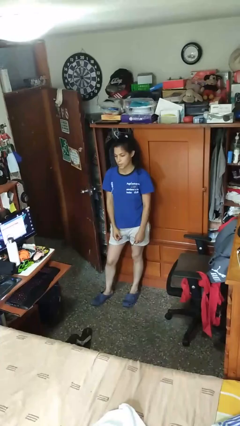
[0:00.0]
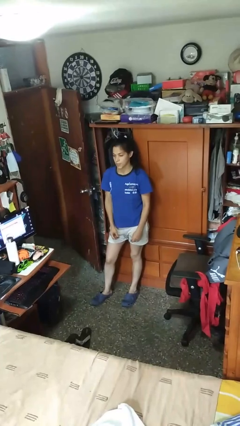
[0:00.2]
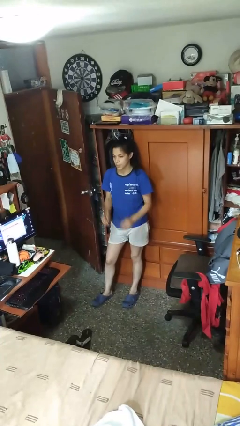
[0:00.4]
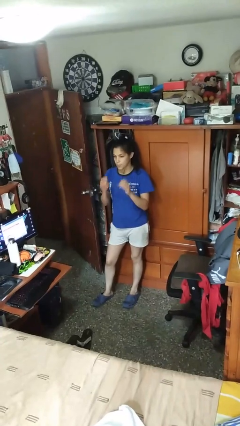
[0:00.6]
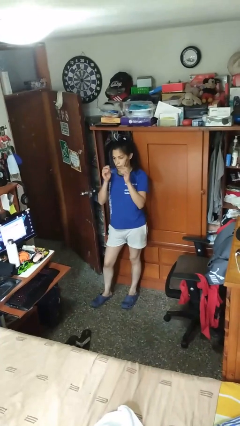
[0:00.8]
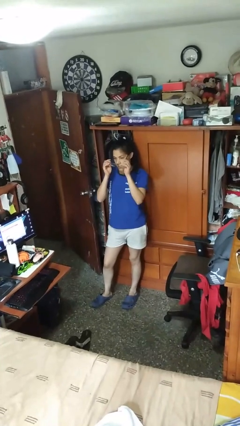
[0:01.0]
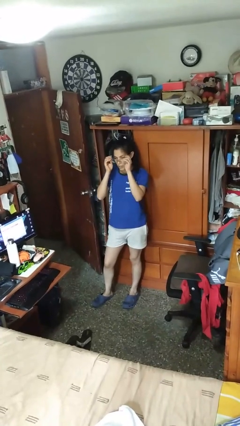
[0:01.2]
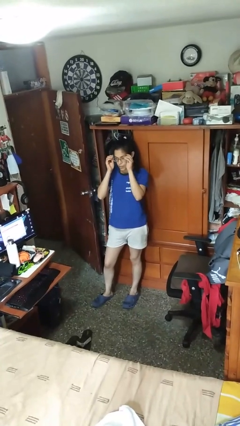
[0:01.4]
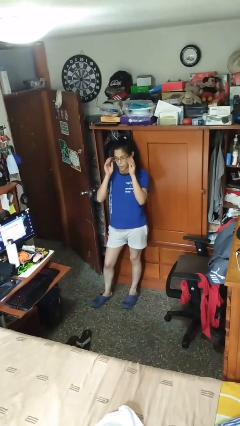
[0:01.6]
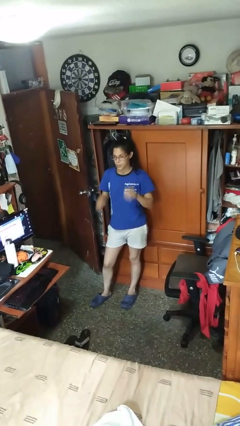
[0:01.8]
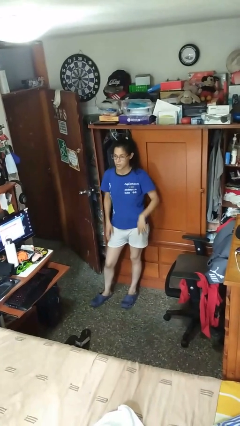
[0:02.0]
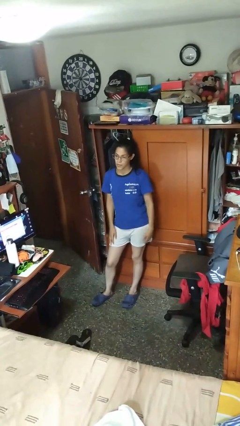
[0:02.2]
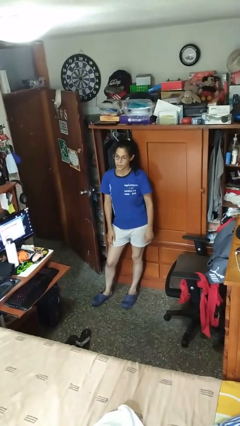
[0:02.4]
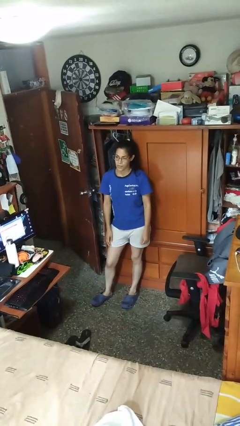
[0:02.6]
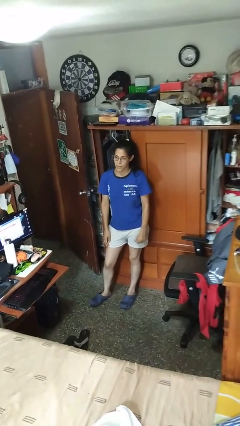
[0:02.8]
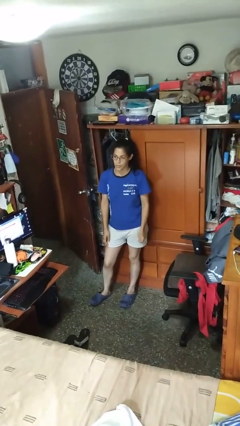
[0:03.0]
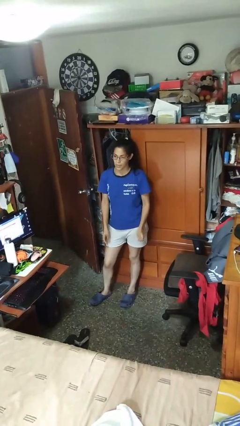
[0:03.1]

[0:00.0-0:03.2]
person puts on glasses

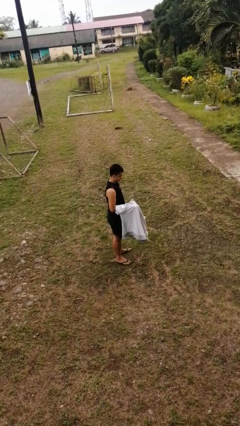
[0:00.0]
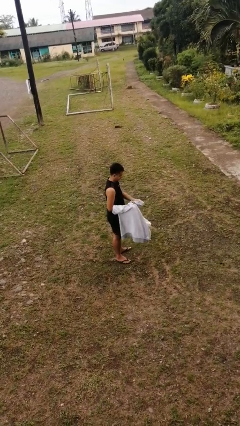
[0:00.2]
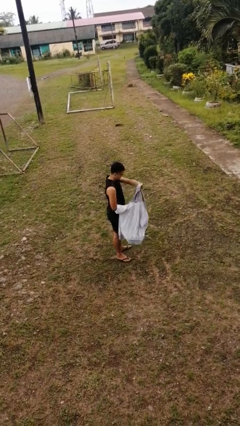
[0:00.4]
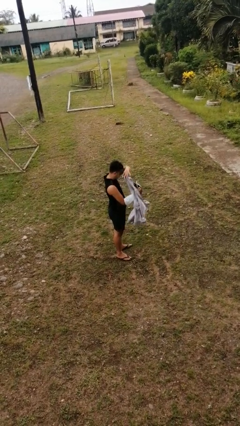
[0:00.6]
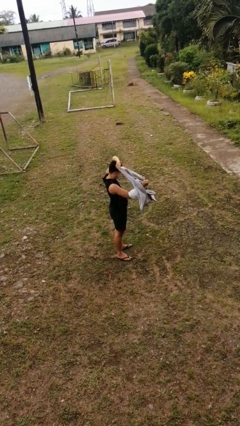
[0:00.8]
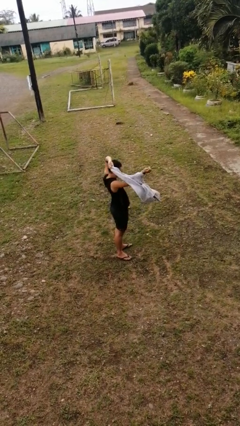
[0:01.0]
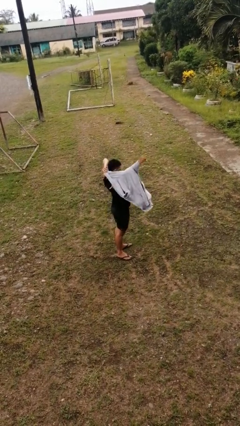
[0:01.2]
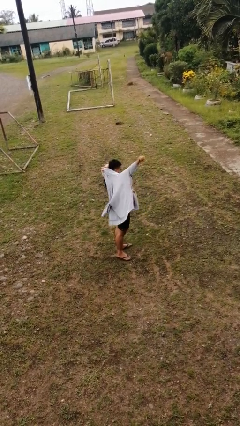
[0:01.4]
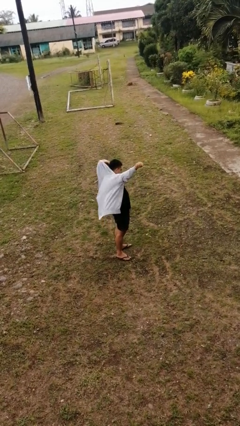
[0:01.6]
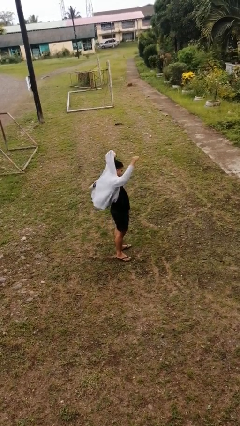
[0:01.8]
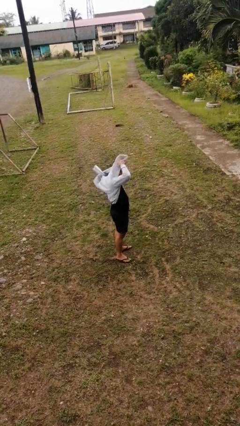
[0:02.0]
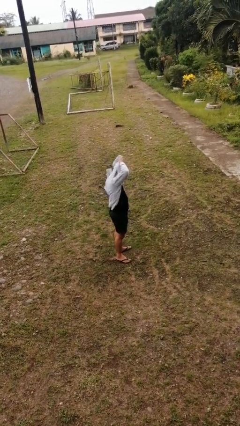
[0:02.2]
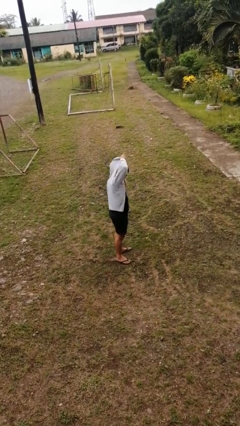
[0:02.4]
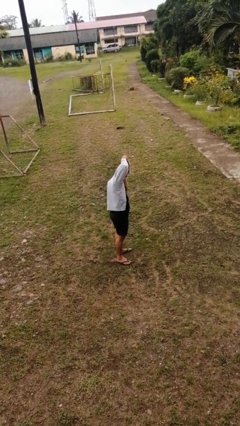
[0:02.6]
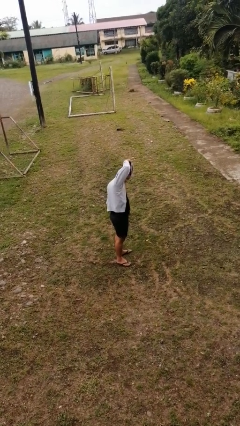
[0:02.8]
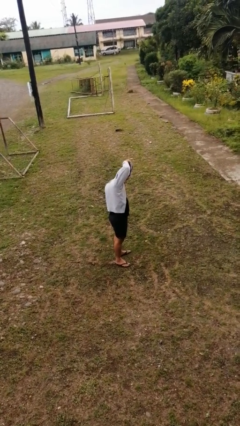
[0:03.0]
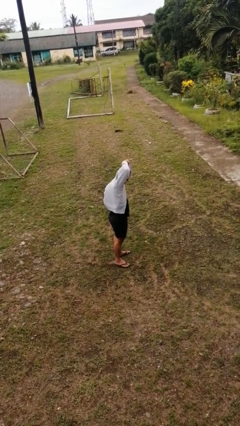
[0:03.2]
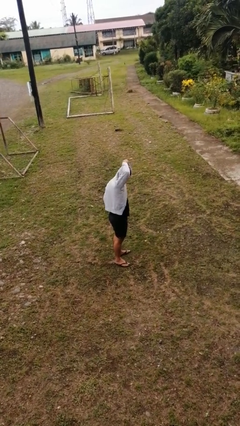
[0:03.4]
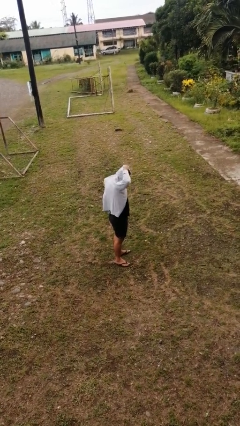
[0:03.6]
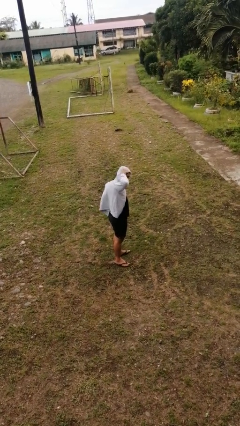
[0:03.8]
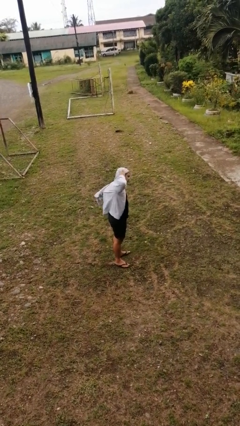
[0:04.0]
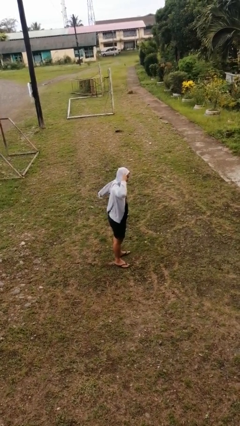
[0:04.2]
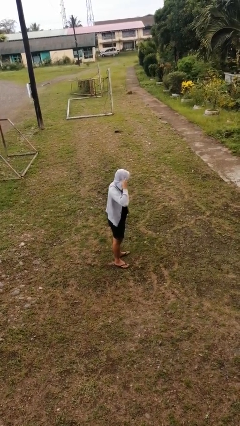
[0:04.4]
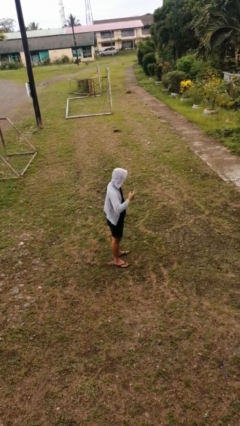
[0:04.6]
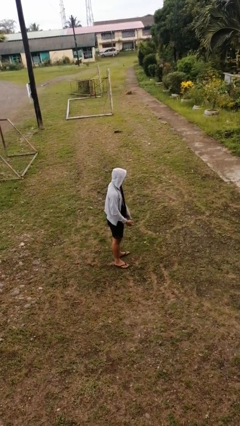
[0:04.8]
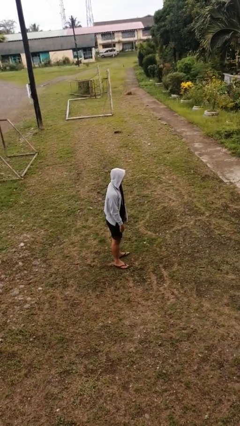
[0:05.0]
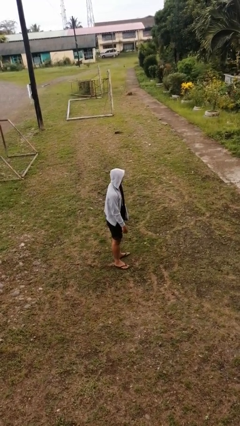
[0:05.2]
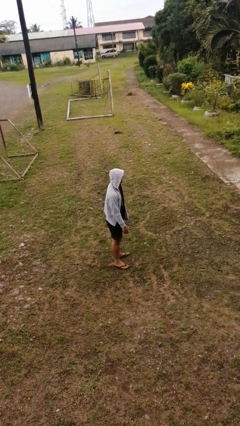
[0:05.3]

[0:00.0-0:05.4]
person puts on hoodie

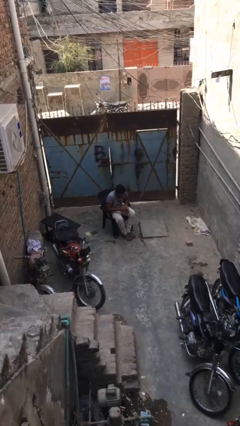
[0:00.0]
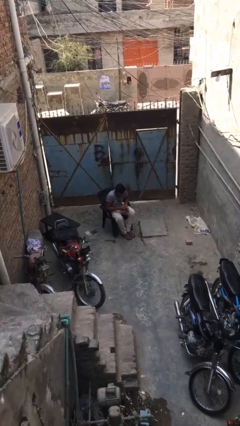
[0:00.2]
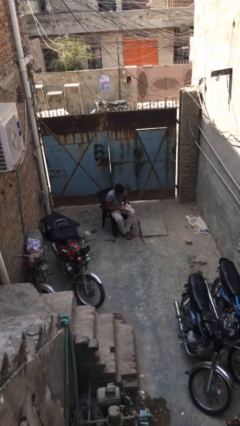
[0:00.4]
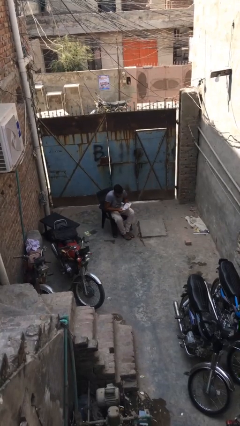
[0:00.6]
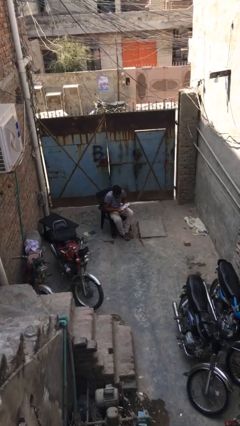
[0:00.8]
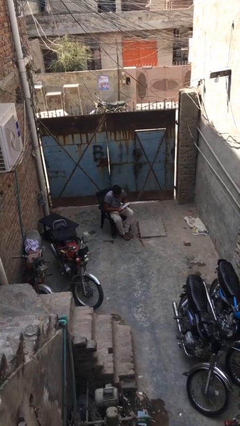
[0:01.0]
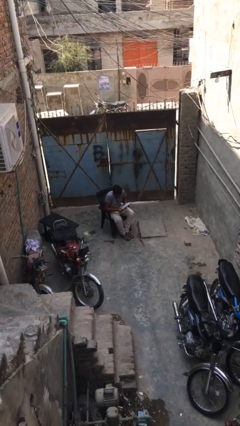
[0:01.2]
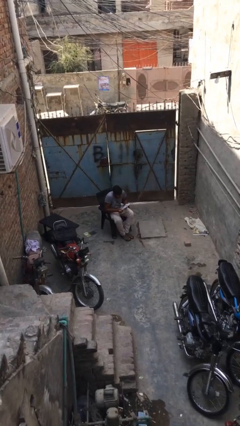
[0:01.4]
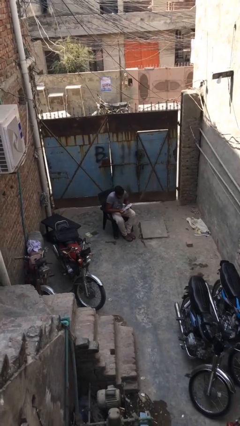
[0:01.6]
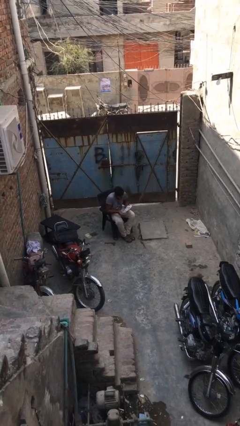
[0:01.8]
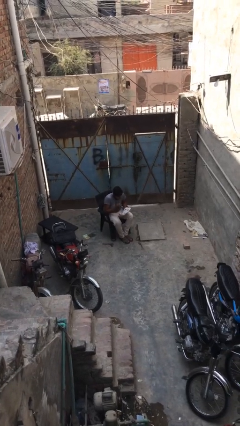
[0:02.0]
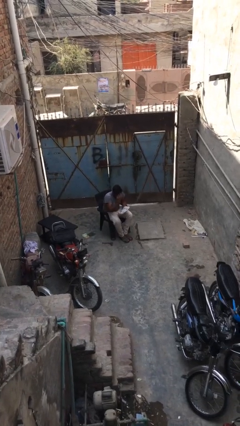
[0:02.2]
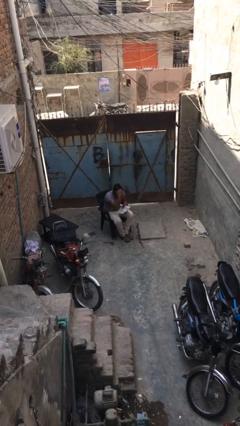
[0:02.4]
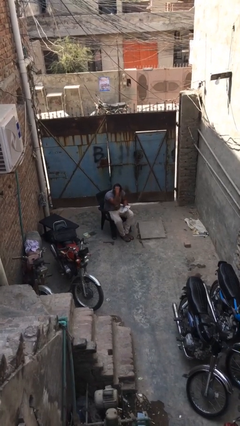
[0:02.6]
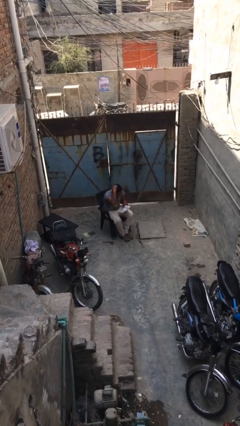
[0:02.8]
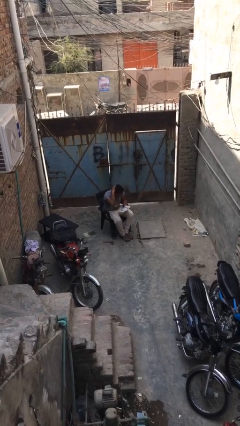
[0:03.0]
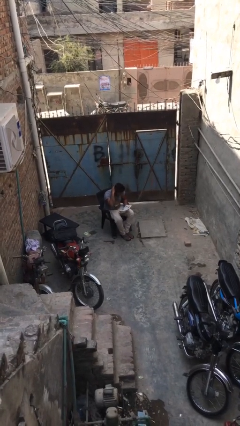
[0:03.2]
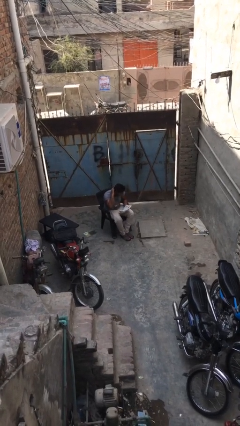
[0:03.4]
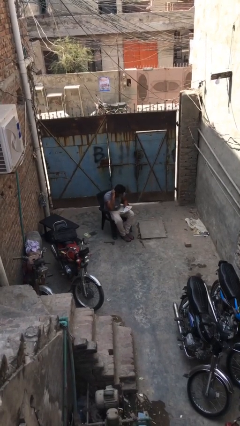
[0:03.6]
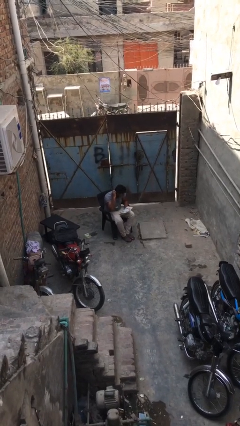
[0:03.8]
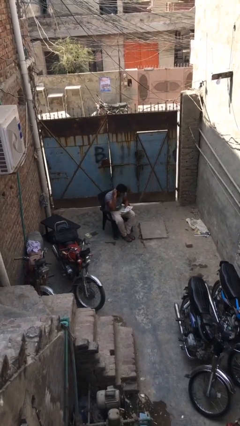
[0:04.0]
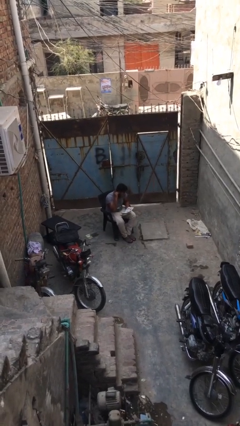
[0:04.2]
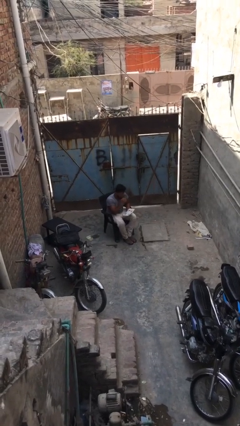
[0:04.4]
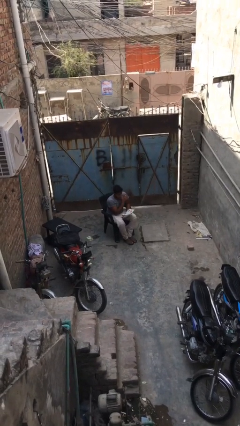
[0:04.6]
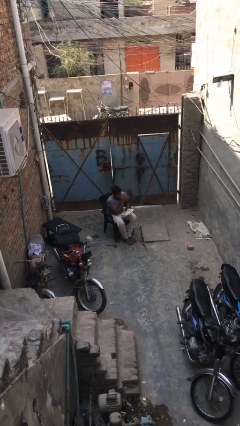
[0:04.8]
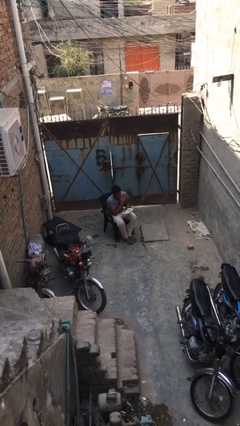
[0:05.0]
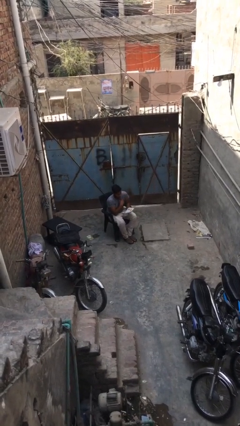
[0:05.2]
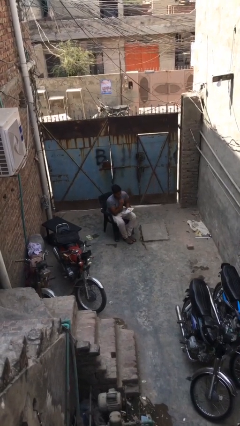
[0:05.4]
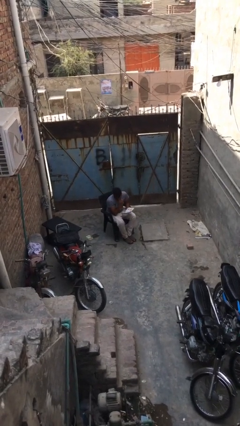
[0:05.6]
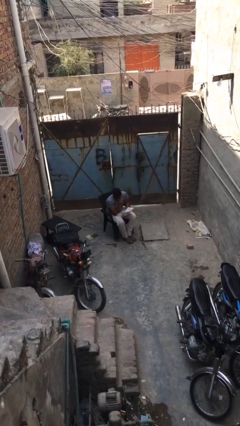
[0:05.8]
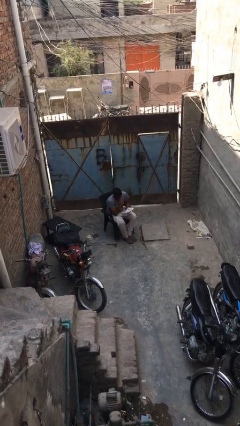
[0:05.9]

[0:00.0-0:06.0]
person reads document

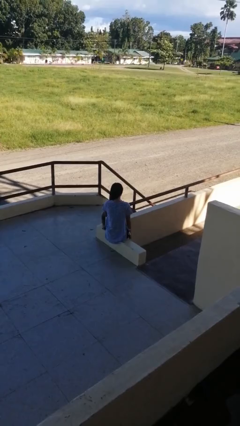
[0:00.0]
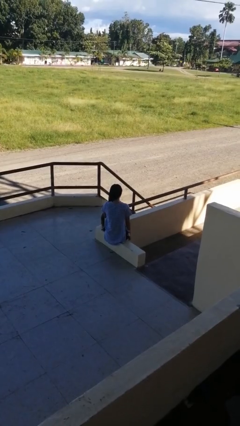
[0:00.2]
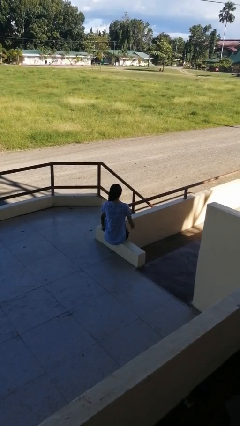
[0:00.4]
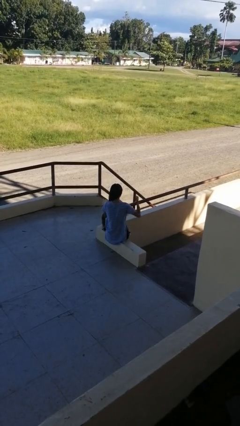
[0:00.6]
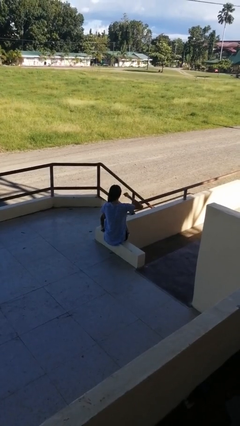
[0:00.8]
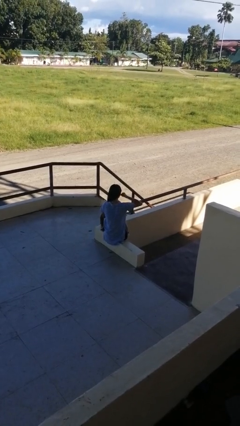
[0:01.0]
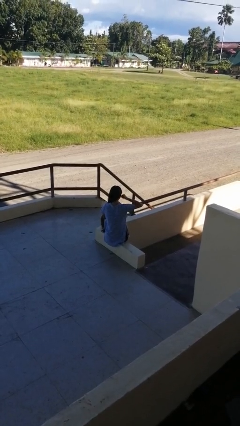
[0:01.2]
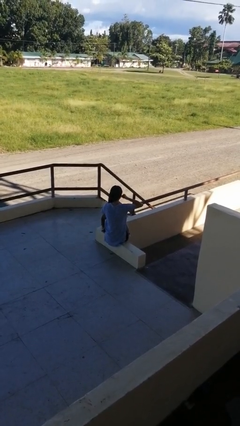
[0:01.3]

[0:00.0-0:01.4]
person gestures call me

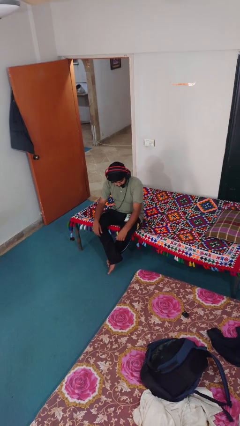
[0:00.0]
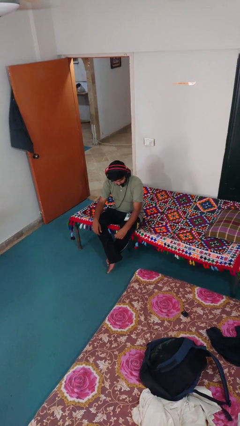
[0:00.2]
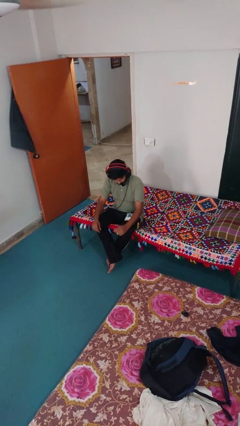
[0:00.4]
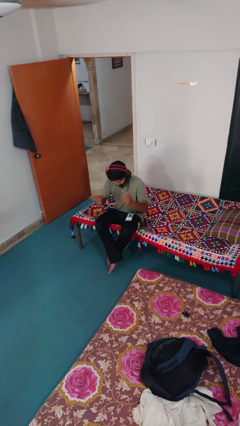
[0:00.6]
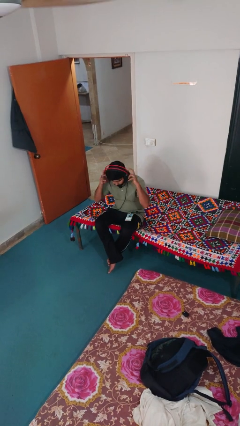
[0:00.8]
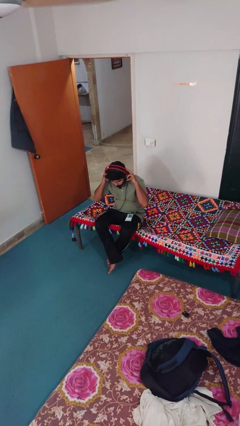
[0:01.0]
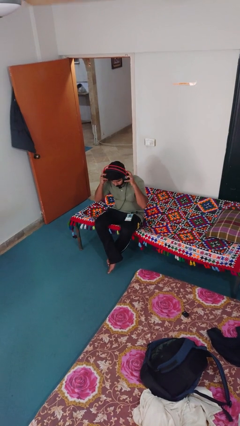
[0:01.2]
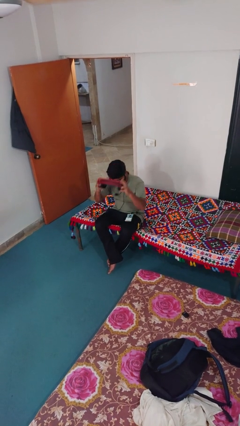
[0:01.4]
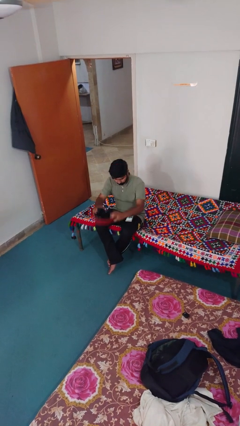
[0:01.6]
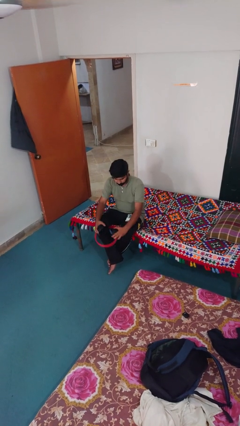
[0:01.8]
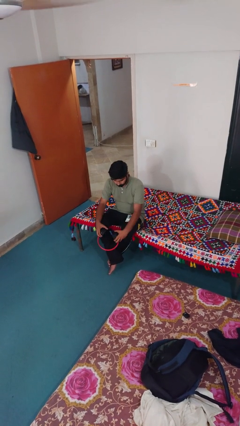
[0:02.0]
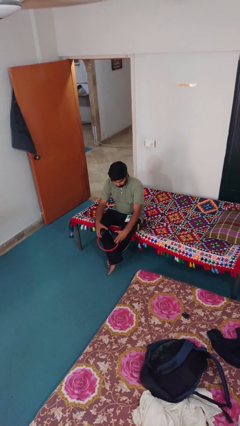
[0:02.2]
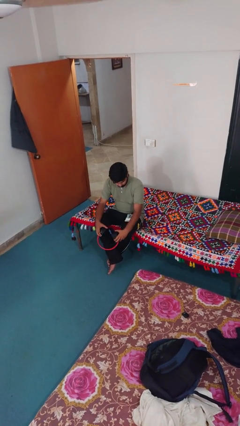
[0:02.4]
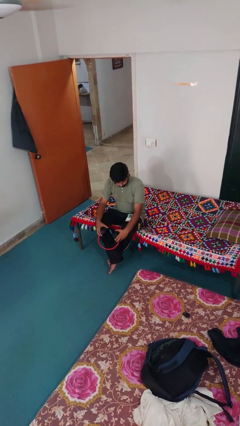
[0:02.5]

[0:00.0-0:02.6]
person takes off headphones
